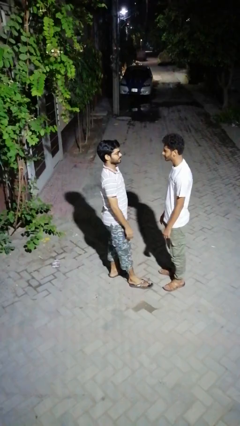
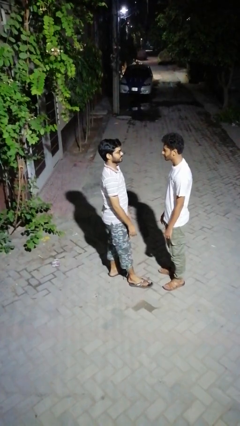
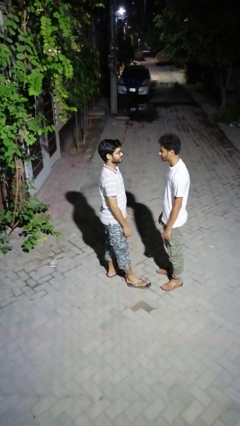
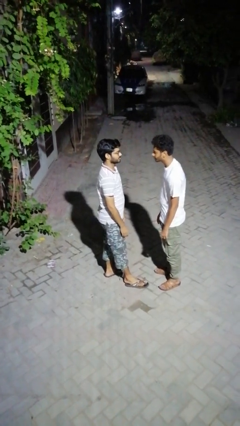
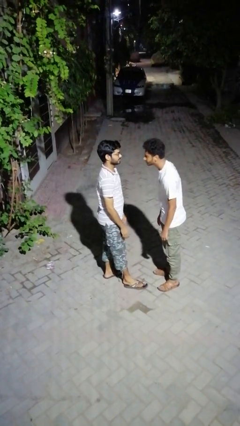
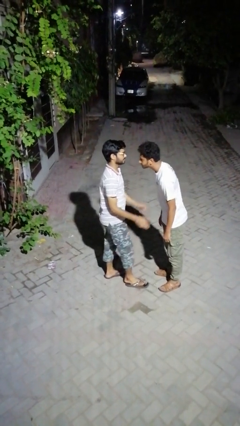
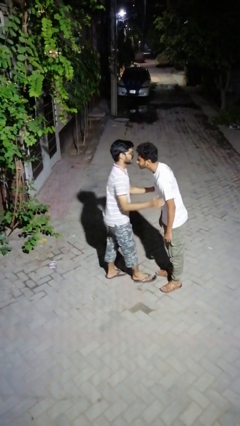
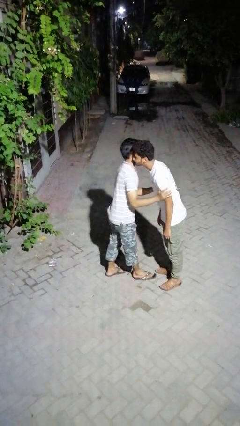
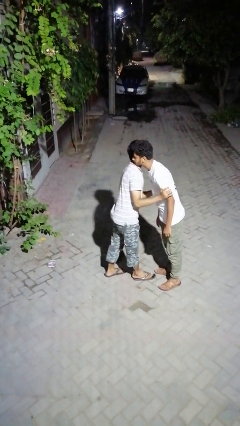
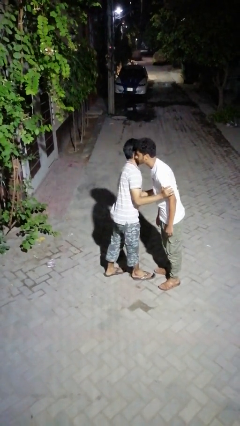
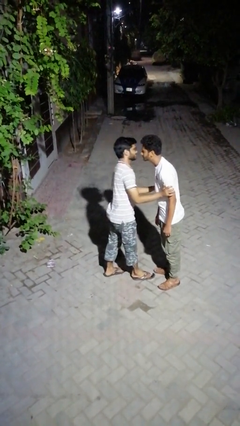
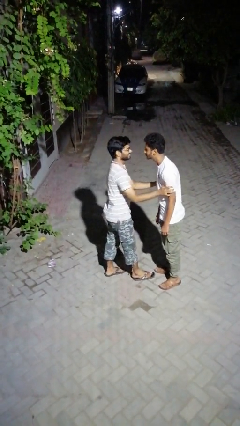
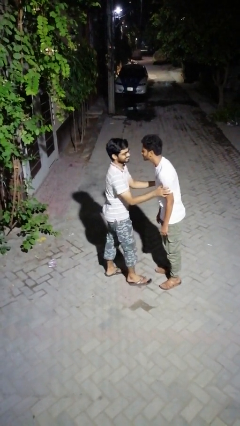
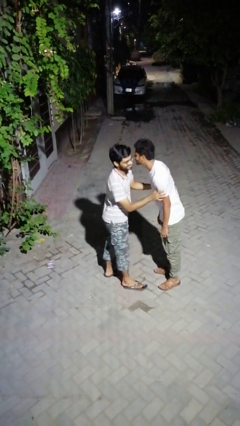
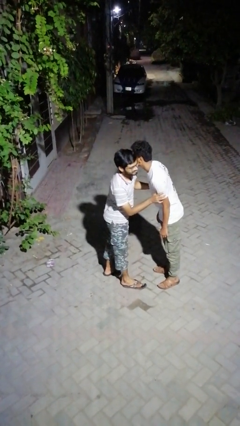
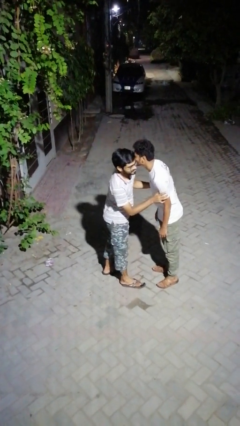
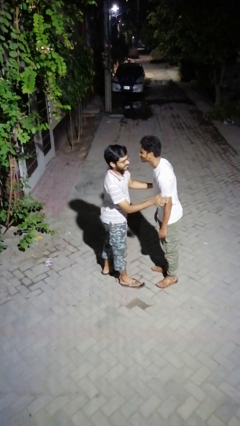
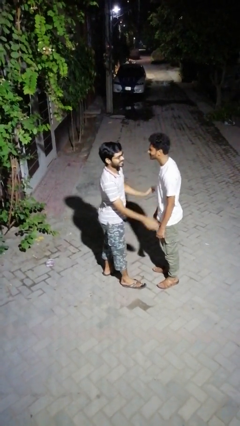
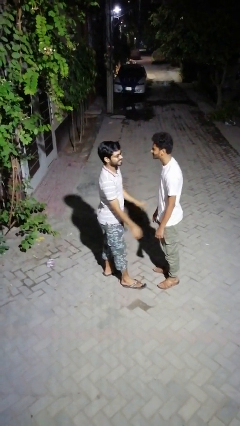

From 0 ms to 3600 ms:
person kisses cheek of person

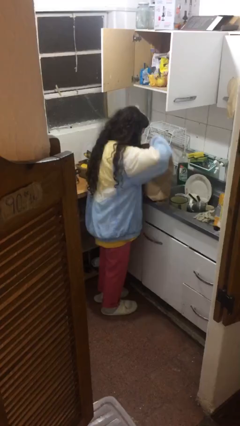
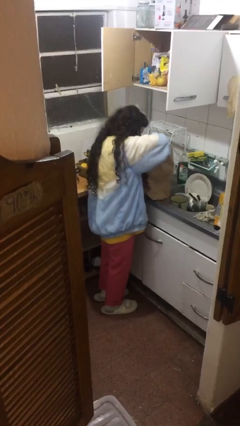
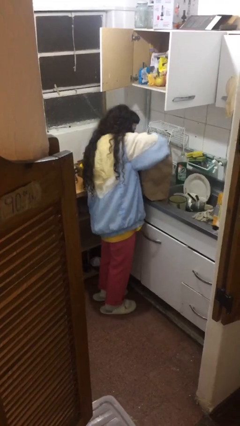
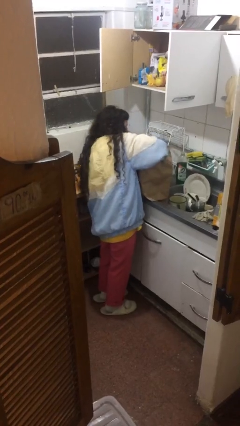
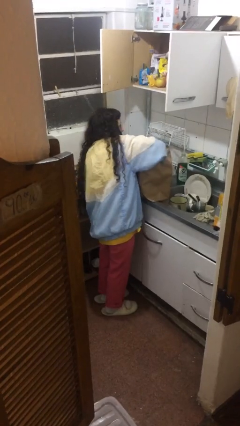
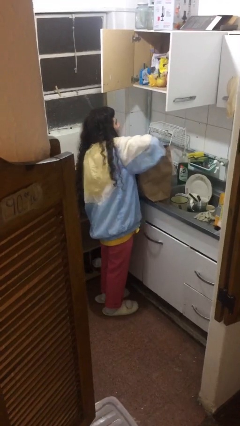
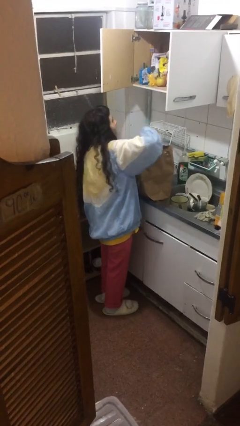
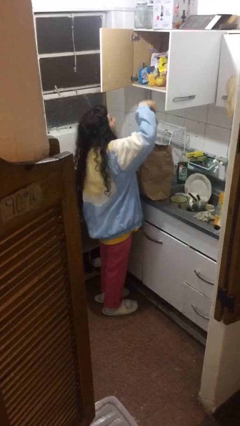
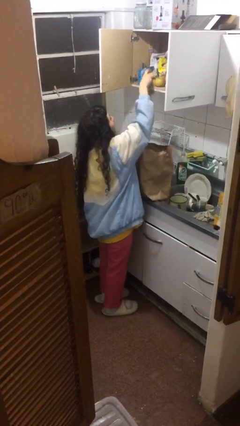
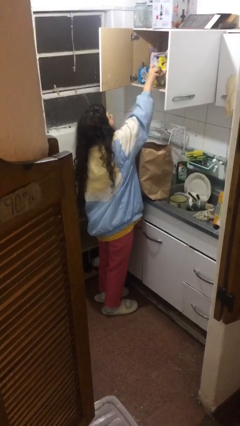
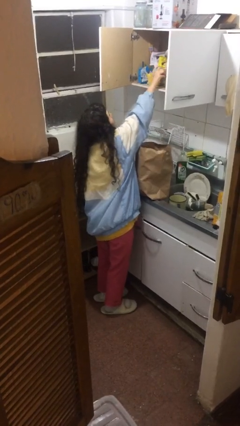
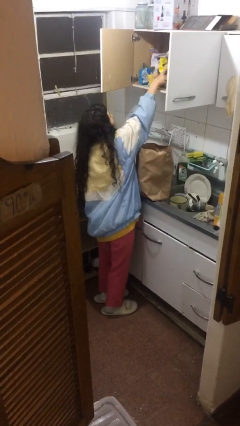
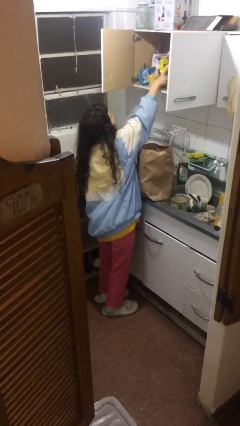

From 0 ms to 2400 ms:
person loads groceries into cabinet

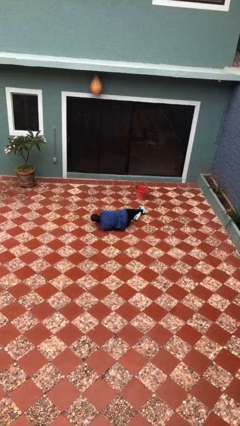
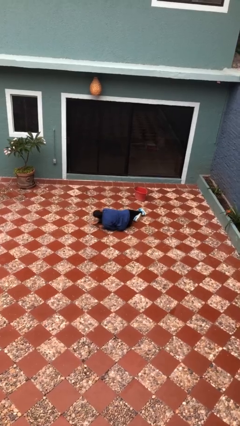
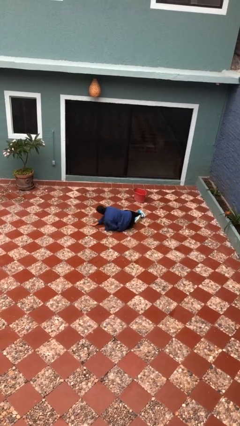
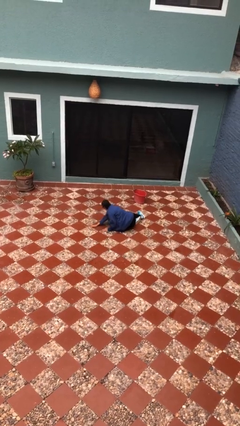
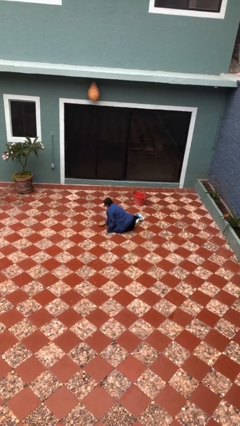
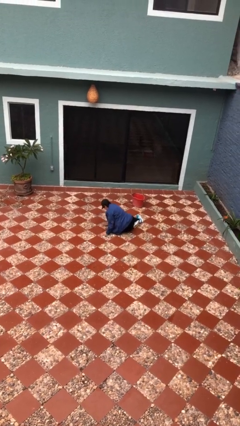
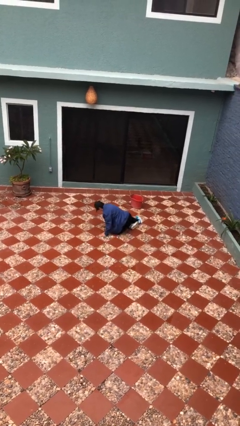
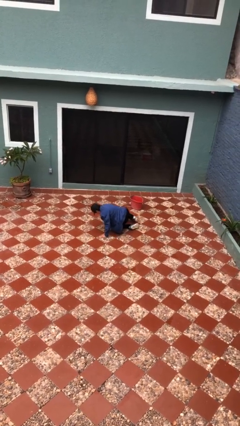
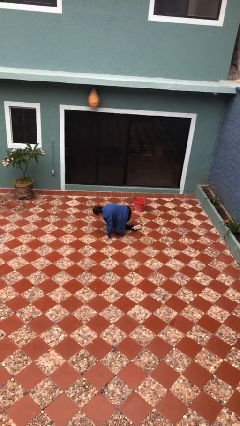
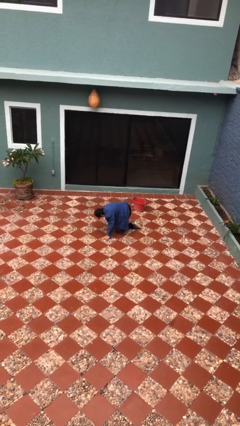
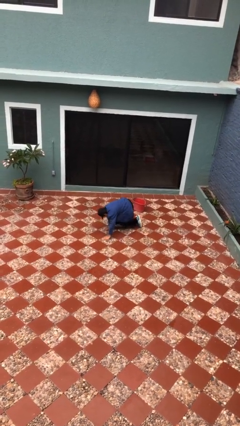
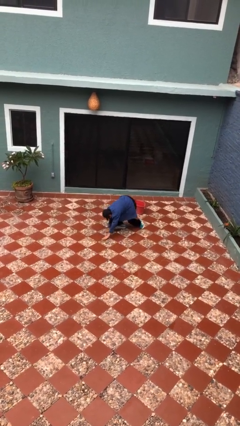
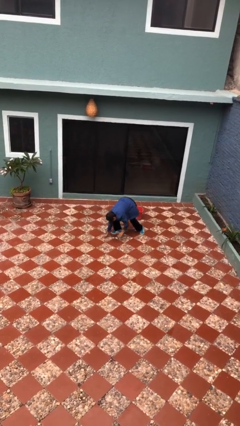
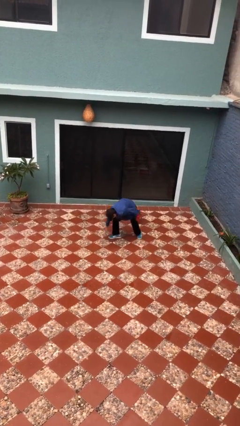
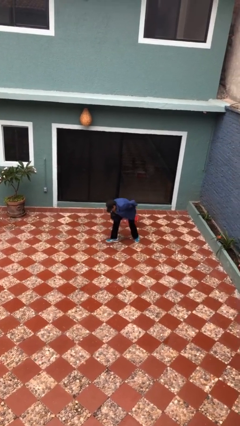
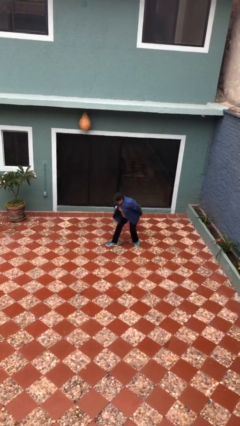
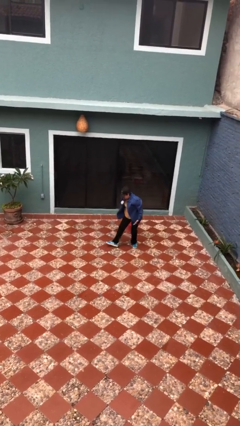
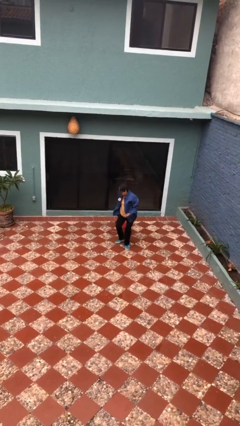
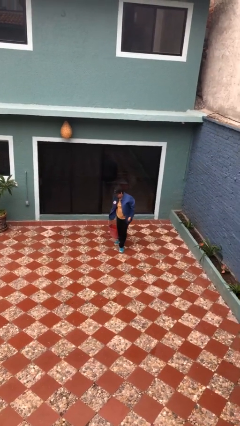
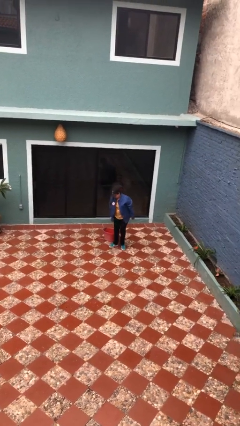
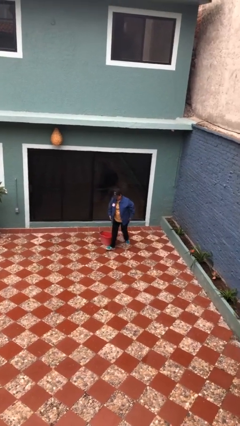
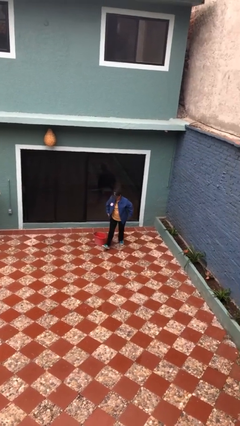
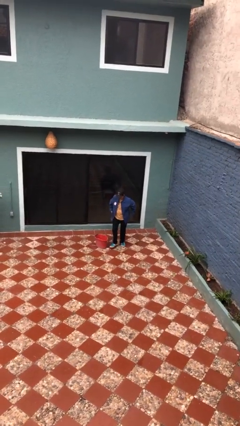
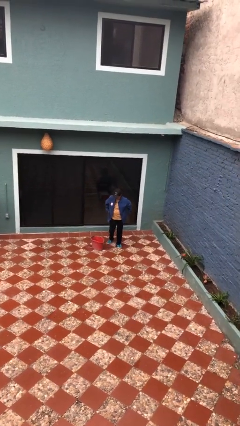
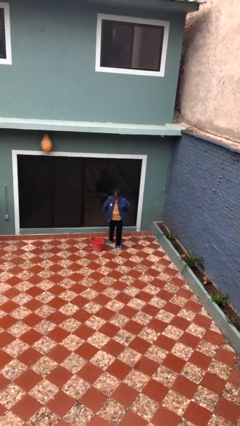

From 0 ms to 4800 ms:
person stands up from floor

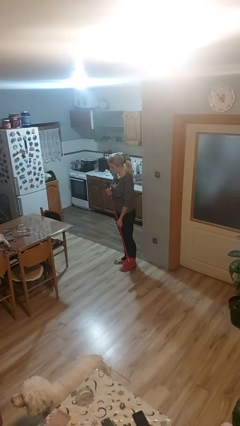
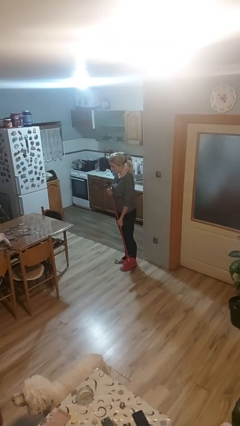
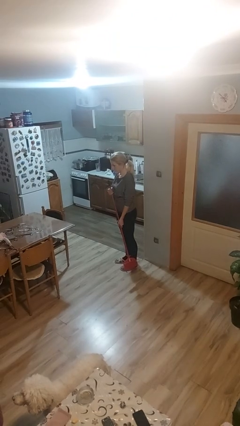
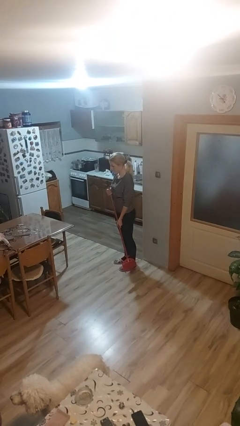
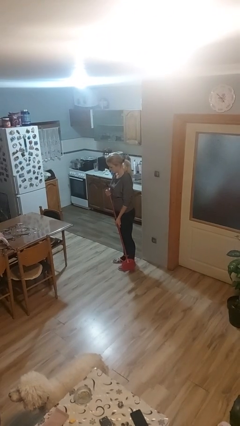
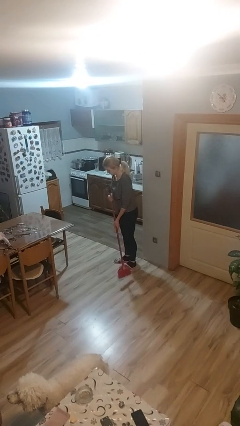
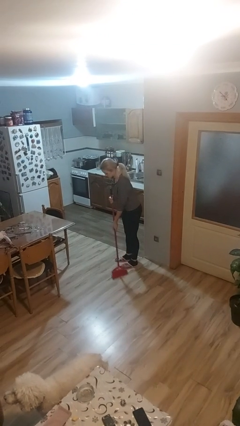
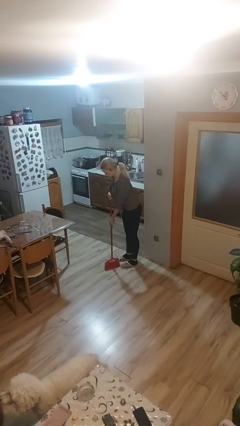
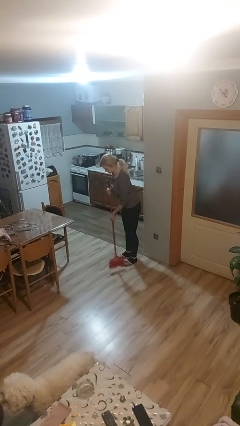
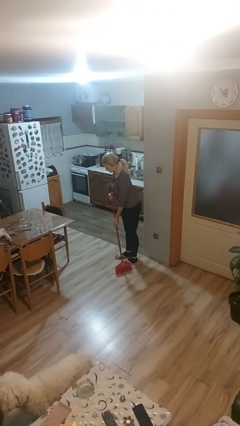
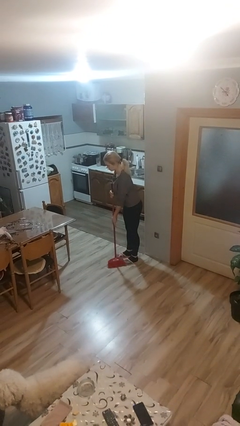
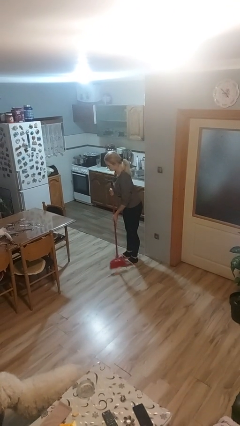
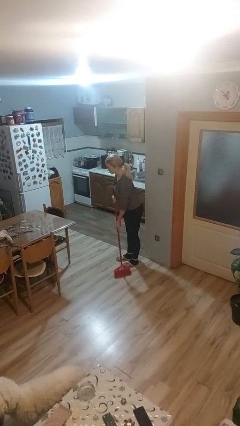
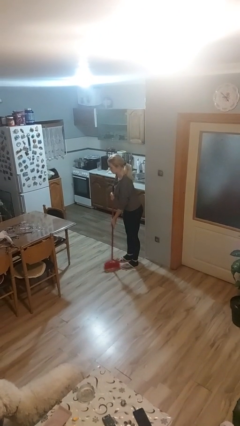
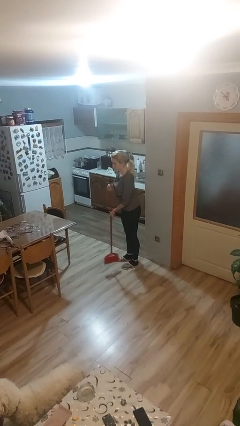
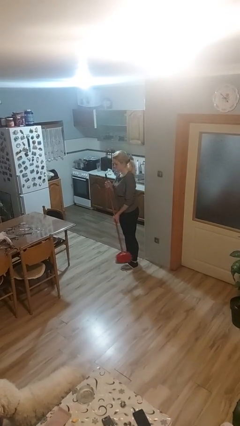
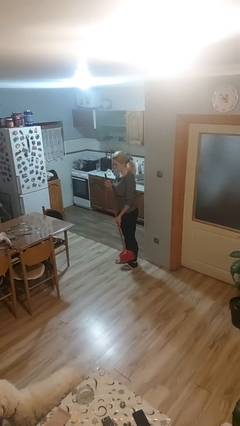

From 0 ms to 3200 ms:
person sweeps floor

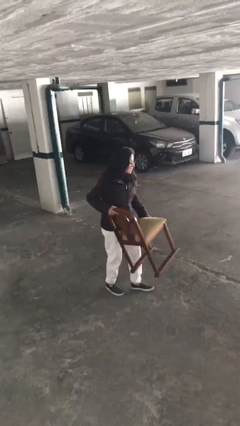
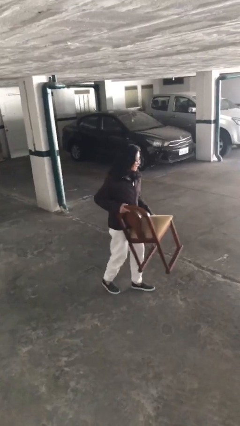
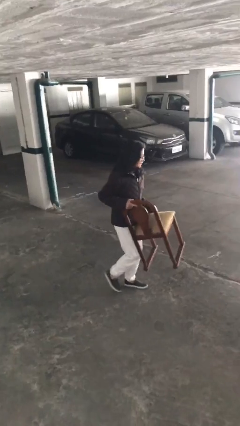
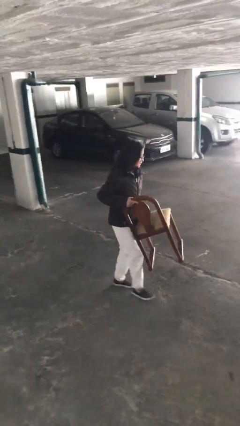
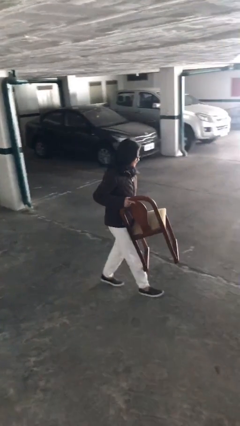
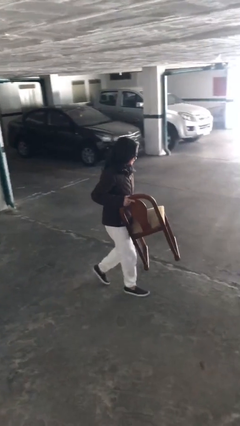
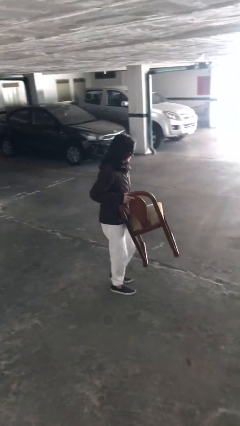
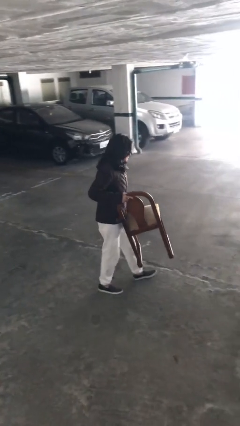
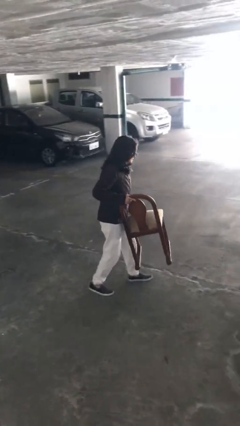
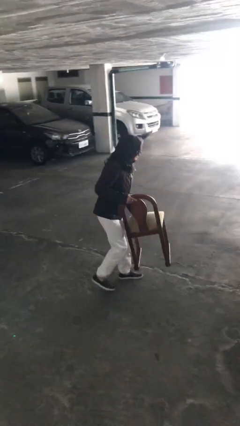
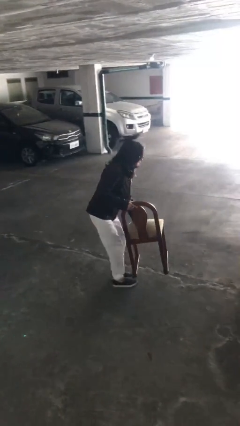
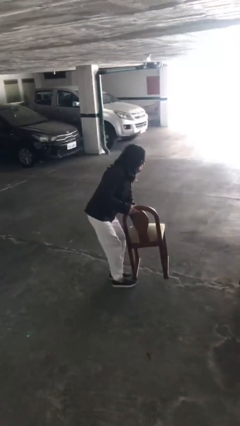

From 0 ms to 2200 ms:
person carries heavy object

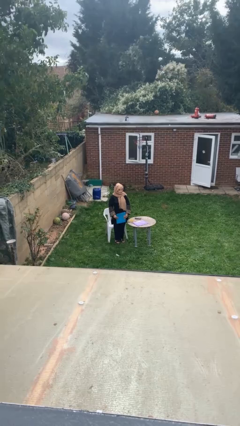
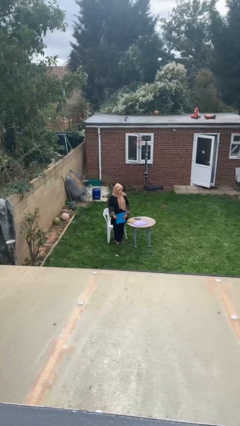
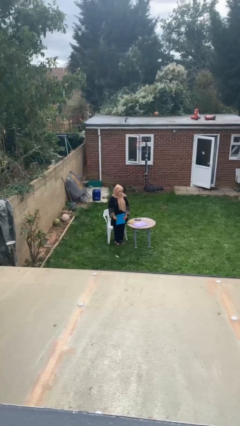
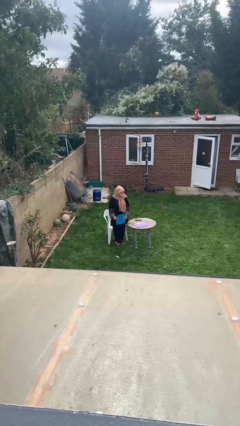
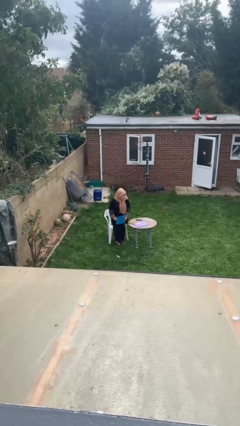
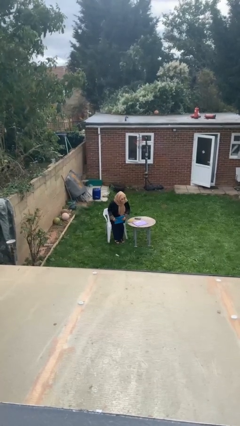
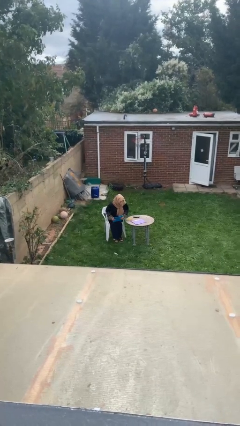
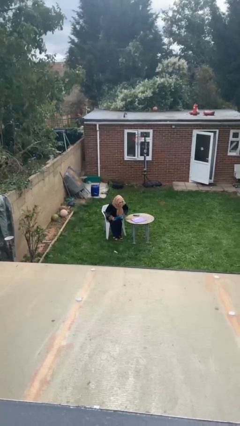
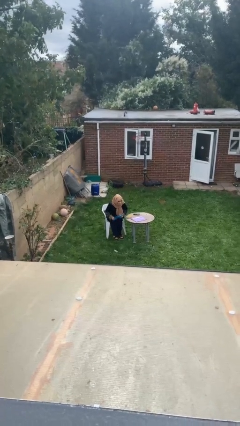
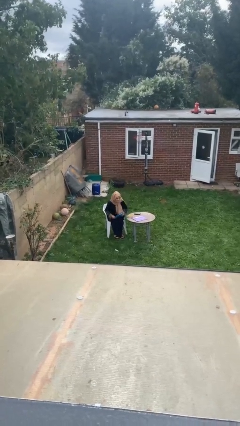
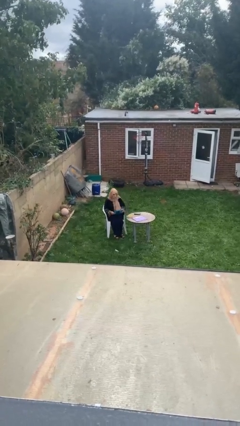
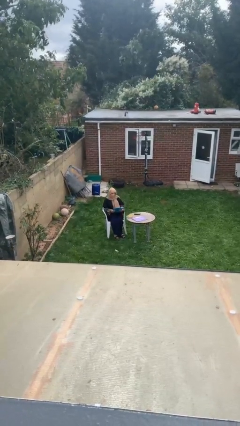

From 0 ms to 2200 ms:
person sits down
